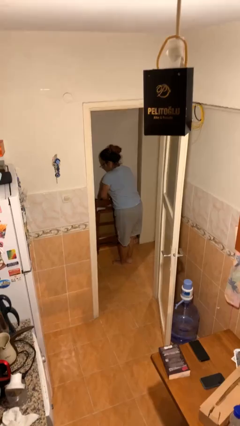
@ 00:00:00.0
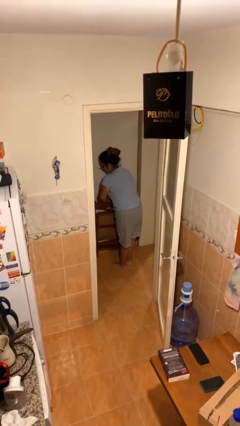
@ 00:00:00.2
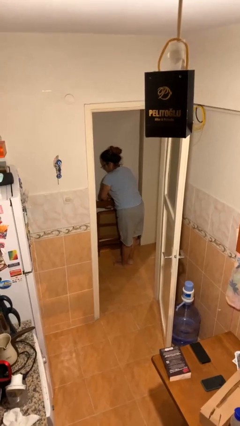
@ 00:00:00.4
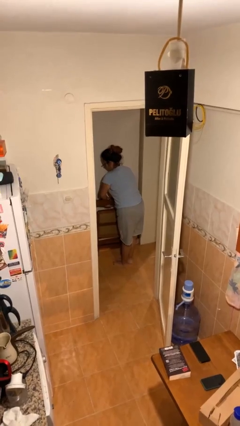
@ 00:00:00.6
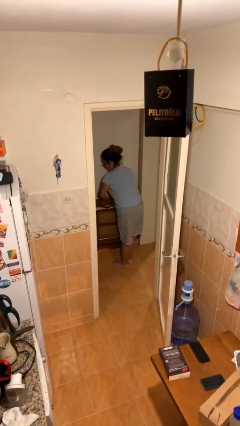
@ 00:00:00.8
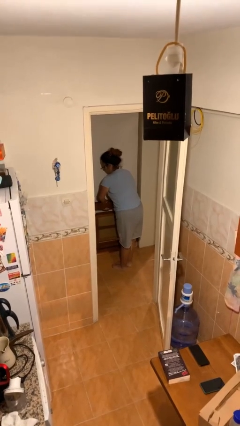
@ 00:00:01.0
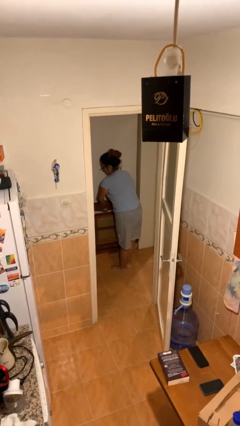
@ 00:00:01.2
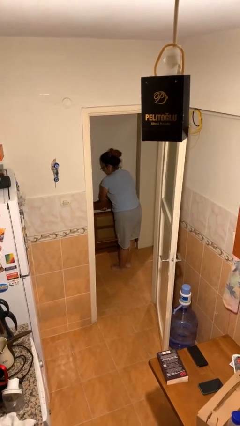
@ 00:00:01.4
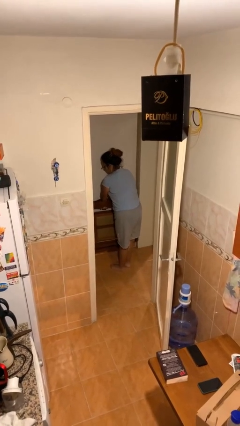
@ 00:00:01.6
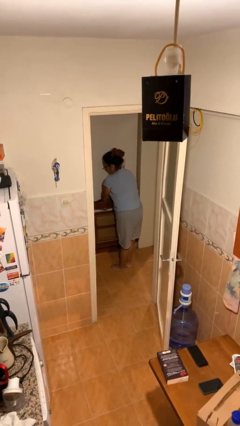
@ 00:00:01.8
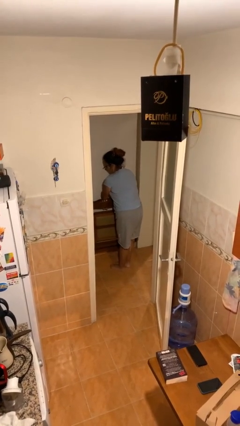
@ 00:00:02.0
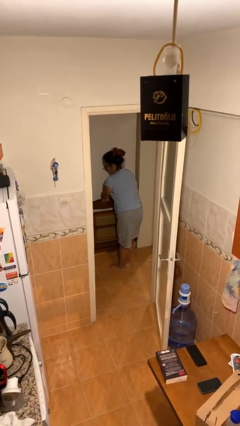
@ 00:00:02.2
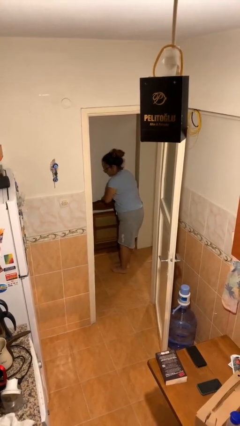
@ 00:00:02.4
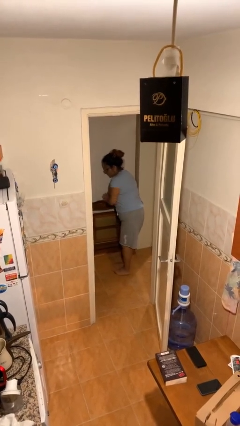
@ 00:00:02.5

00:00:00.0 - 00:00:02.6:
person puts down object on floor

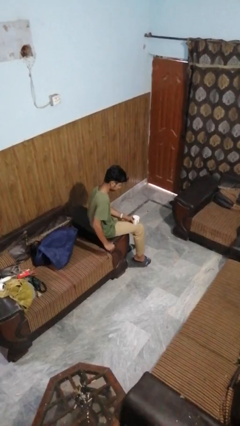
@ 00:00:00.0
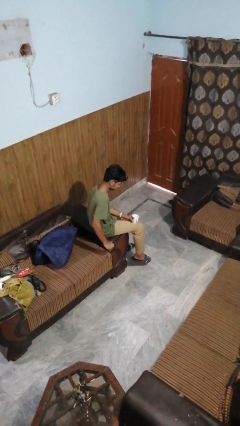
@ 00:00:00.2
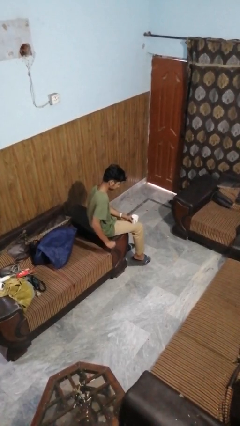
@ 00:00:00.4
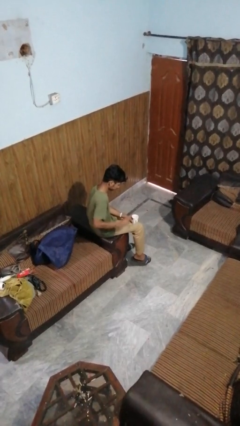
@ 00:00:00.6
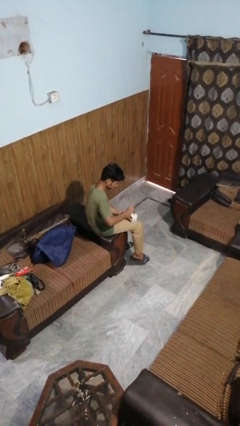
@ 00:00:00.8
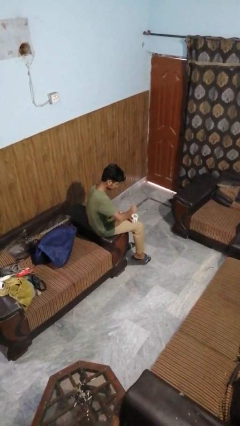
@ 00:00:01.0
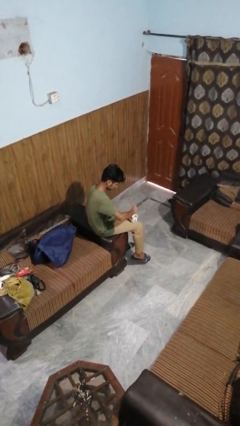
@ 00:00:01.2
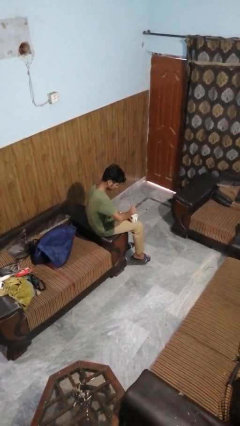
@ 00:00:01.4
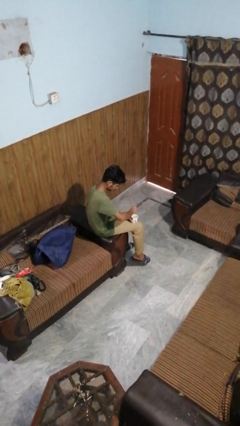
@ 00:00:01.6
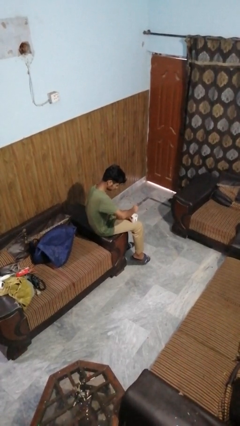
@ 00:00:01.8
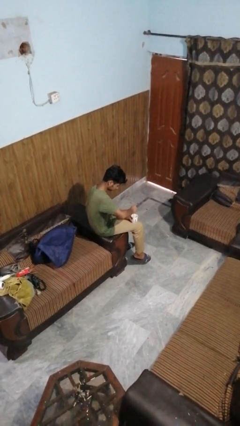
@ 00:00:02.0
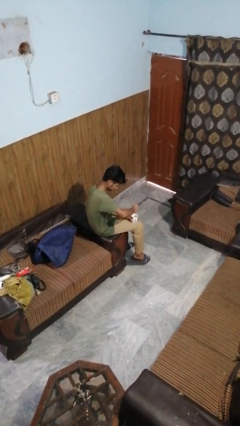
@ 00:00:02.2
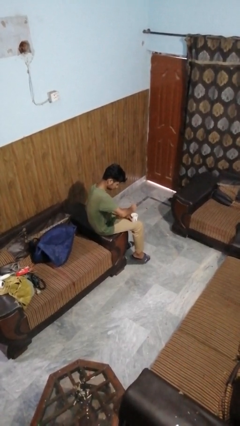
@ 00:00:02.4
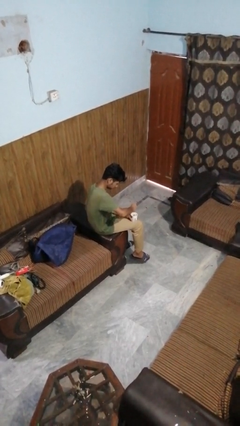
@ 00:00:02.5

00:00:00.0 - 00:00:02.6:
person stirs mug

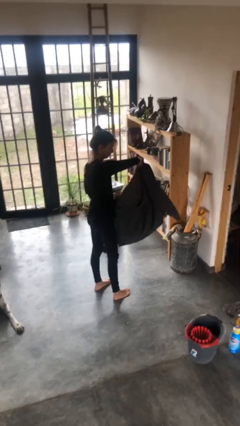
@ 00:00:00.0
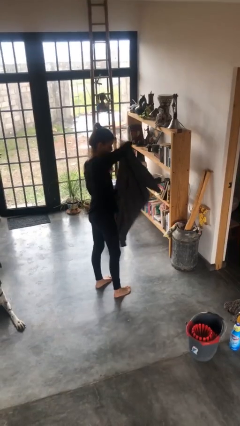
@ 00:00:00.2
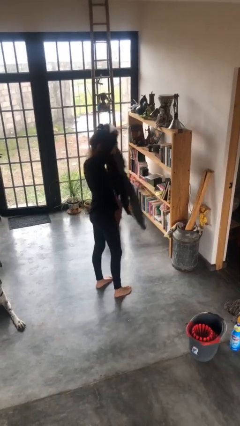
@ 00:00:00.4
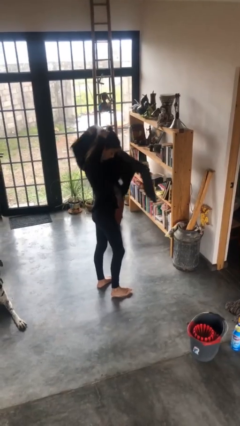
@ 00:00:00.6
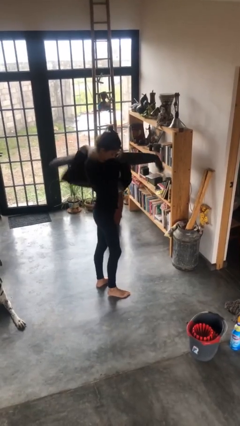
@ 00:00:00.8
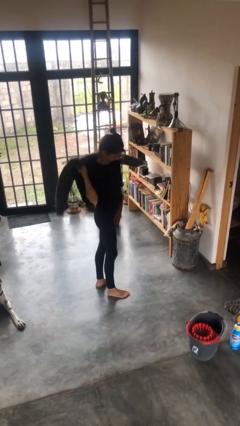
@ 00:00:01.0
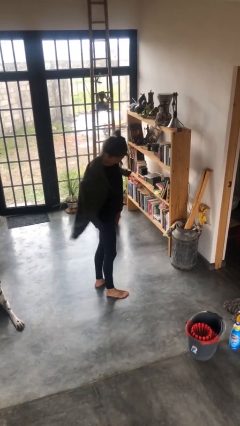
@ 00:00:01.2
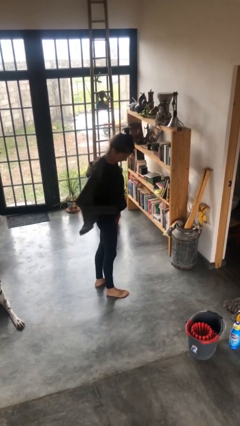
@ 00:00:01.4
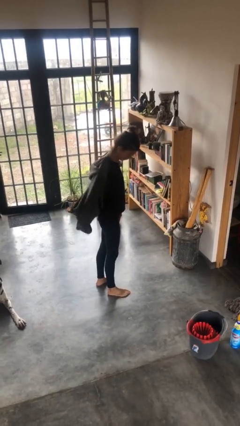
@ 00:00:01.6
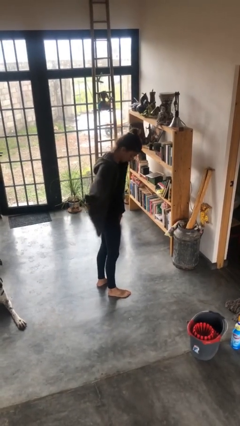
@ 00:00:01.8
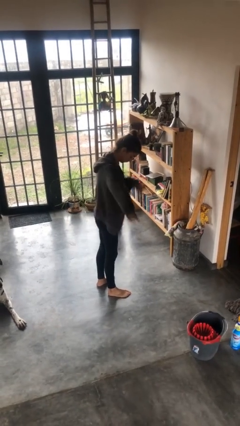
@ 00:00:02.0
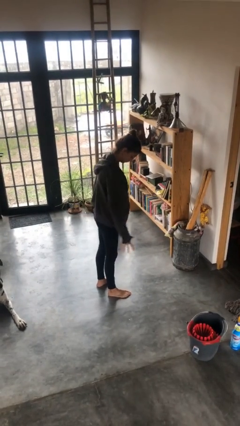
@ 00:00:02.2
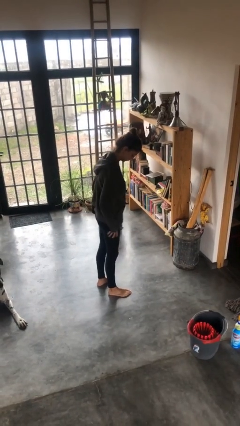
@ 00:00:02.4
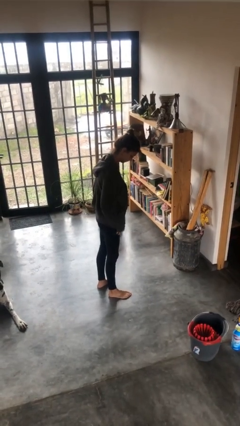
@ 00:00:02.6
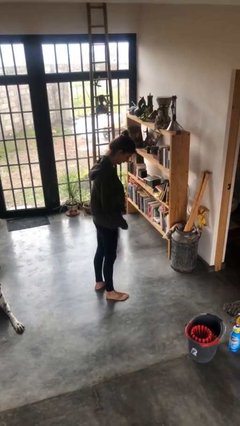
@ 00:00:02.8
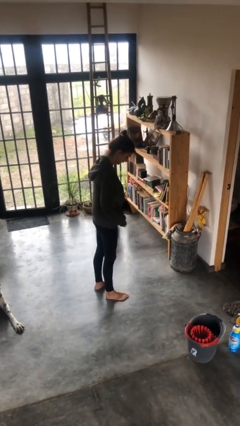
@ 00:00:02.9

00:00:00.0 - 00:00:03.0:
person puts on jacket

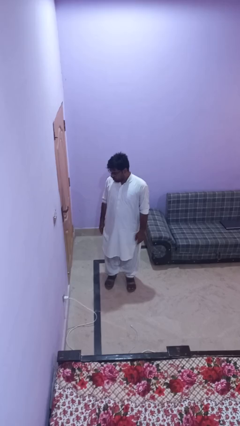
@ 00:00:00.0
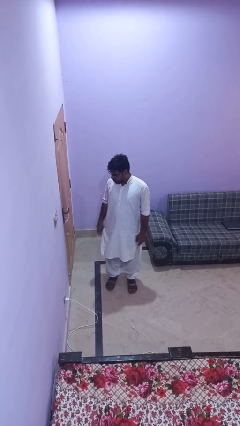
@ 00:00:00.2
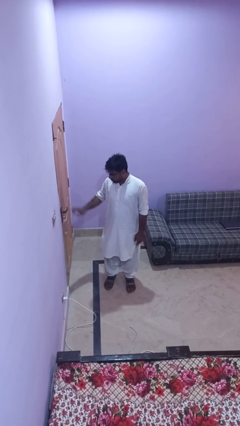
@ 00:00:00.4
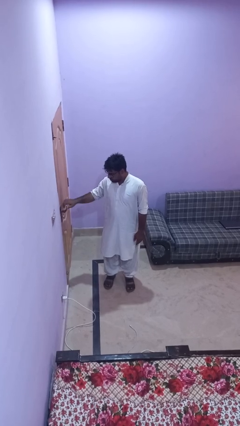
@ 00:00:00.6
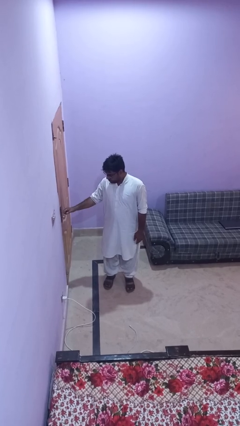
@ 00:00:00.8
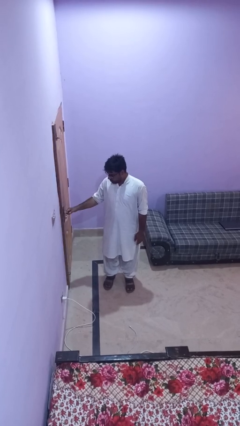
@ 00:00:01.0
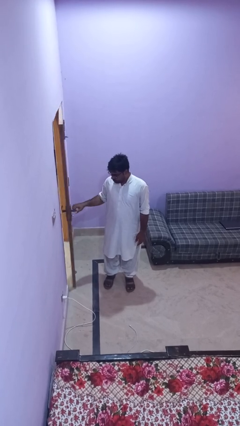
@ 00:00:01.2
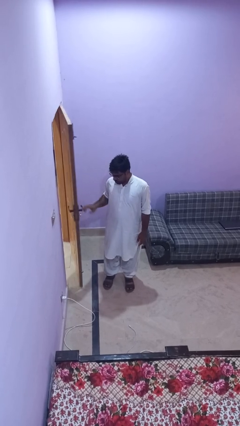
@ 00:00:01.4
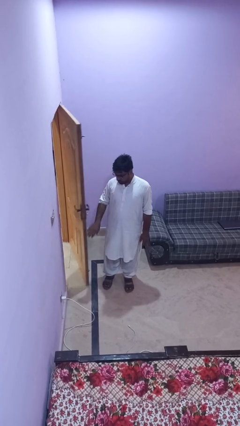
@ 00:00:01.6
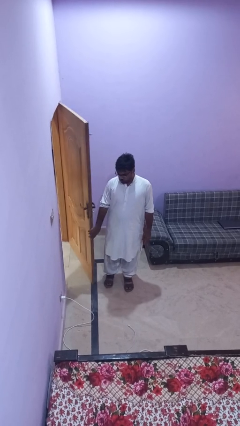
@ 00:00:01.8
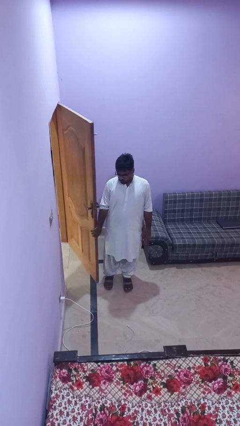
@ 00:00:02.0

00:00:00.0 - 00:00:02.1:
person opens facility door

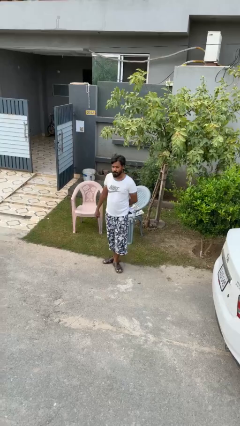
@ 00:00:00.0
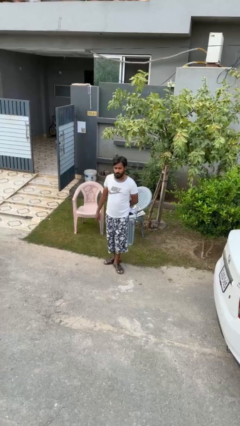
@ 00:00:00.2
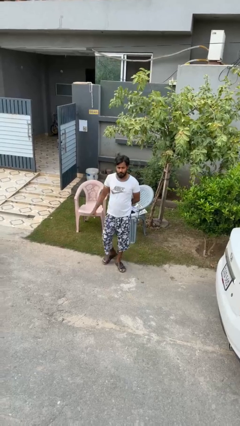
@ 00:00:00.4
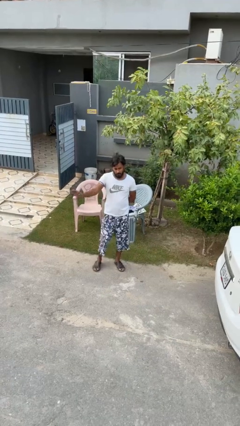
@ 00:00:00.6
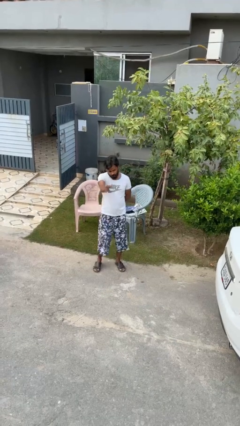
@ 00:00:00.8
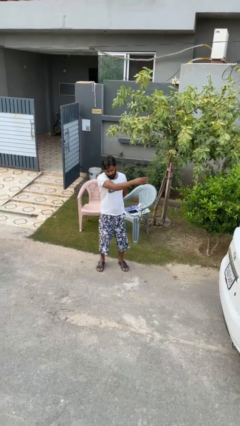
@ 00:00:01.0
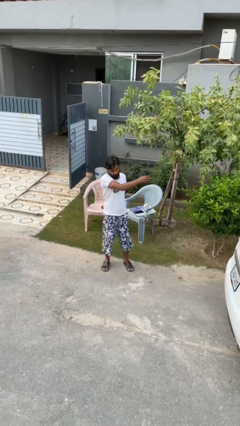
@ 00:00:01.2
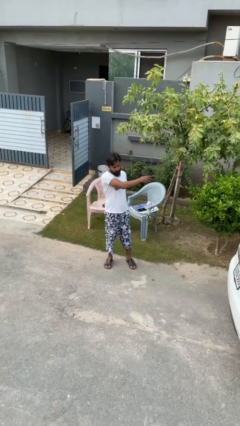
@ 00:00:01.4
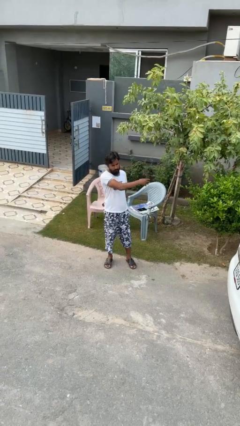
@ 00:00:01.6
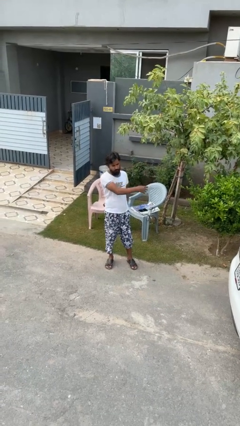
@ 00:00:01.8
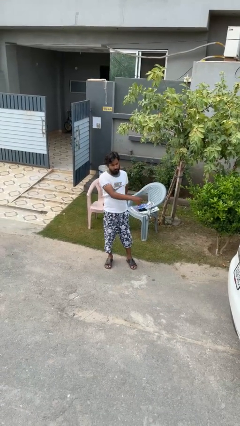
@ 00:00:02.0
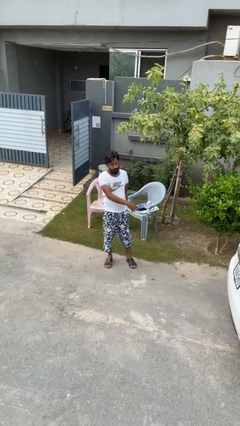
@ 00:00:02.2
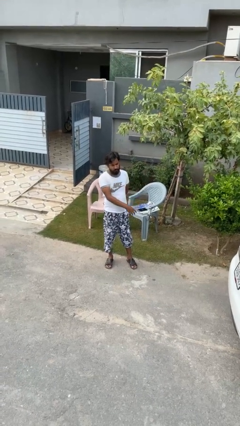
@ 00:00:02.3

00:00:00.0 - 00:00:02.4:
person gestures swipe left

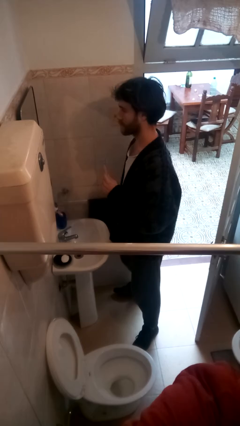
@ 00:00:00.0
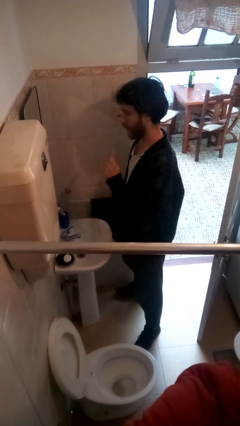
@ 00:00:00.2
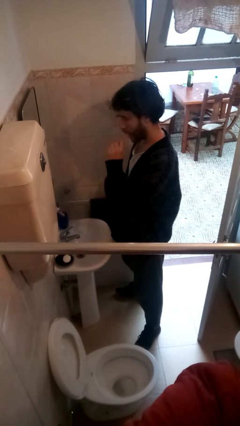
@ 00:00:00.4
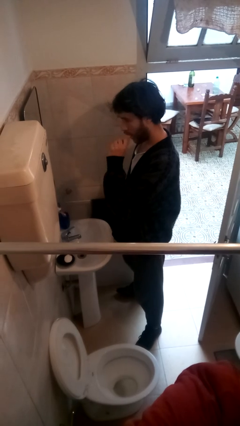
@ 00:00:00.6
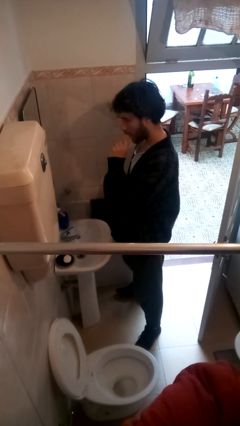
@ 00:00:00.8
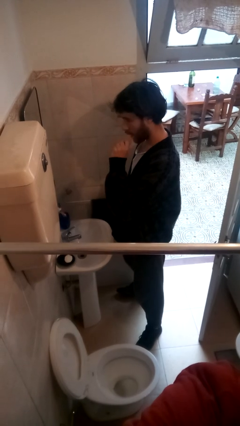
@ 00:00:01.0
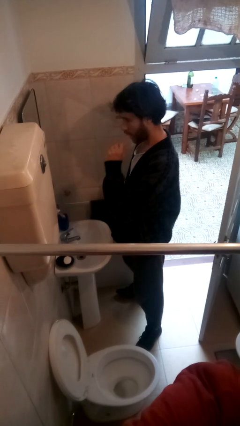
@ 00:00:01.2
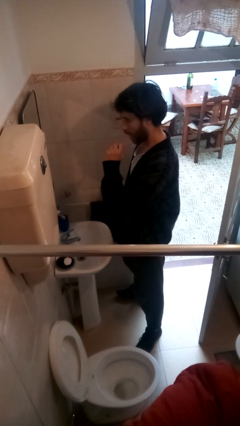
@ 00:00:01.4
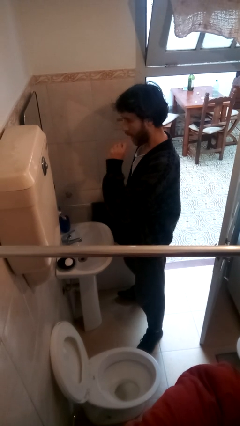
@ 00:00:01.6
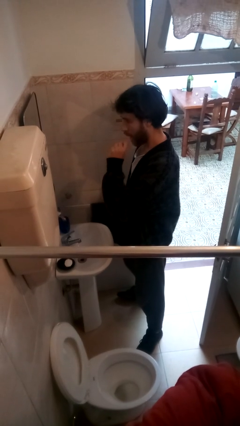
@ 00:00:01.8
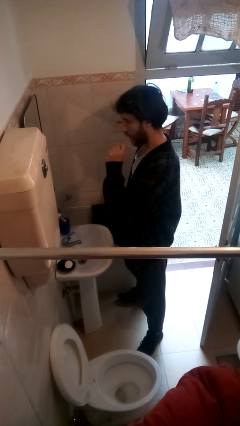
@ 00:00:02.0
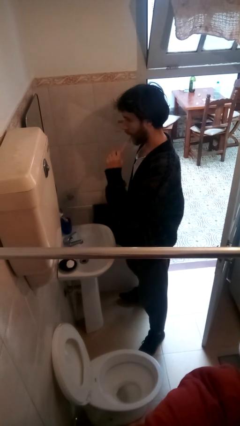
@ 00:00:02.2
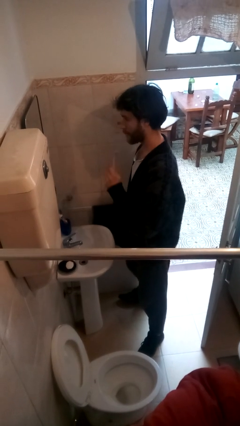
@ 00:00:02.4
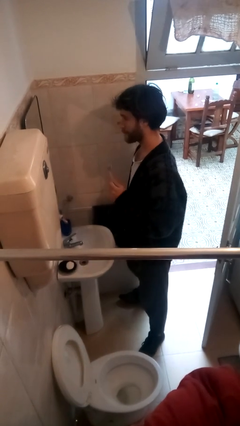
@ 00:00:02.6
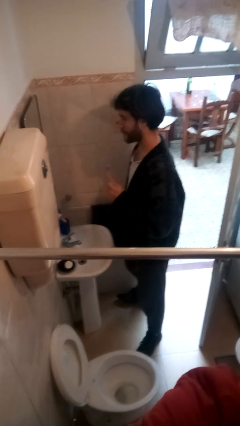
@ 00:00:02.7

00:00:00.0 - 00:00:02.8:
person brushes teeth

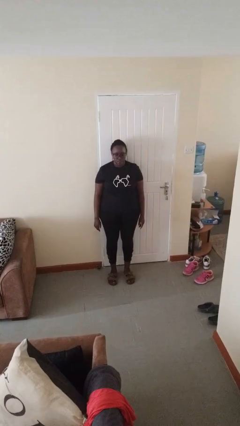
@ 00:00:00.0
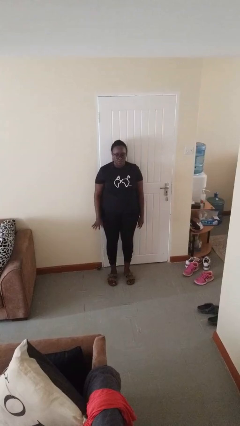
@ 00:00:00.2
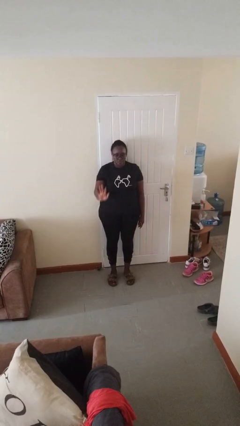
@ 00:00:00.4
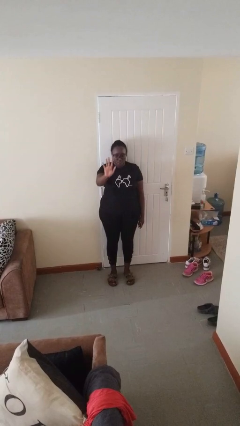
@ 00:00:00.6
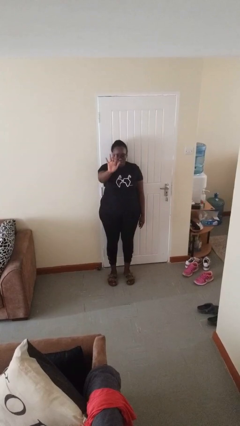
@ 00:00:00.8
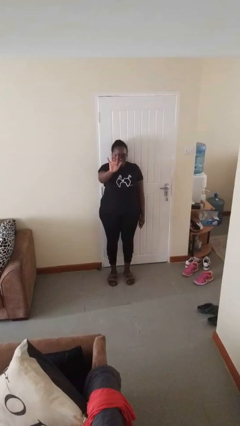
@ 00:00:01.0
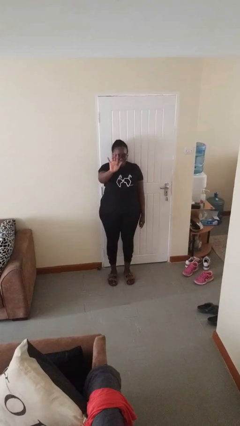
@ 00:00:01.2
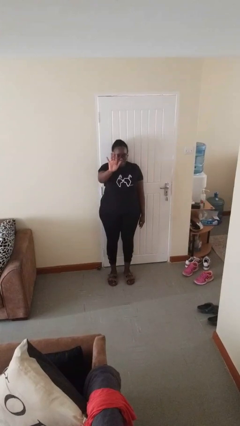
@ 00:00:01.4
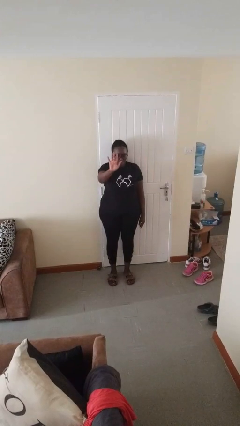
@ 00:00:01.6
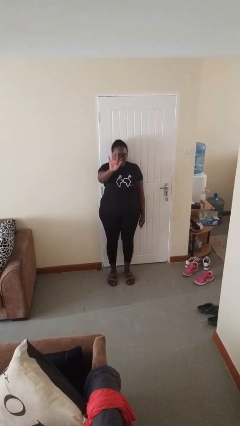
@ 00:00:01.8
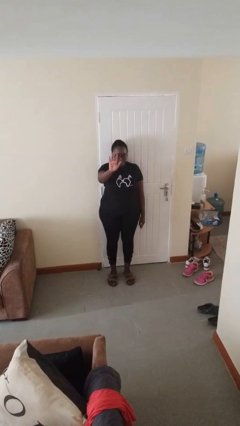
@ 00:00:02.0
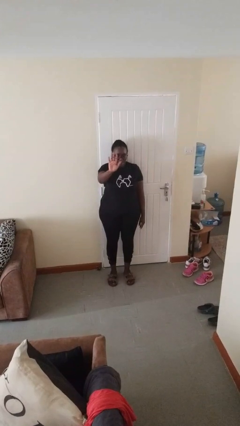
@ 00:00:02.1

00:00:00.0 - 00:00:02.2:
person gestures number five
